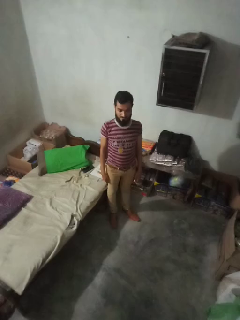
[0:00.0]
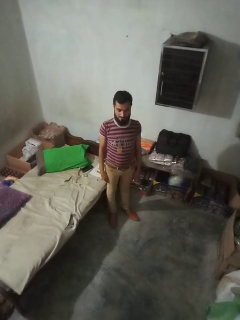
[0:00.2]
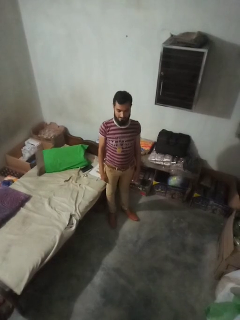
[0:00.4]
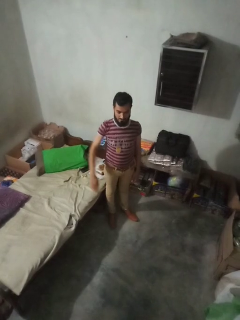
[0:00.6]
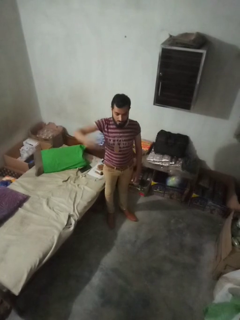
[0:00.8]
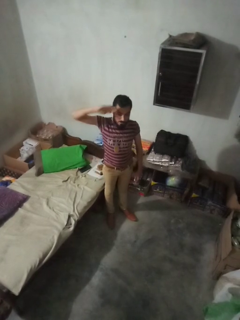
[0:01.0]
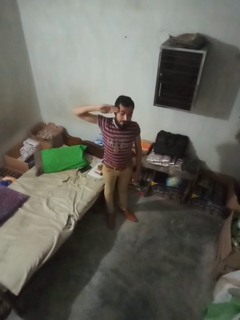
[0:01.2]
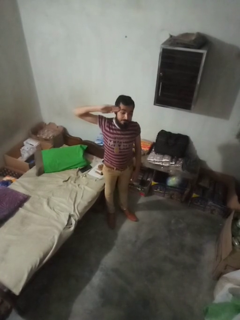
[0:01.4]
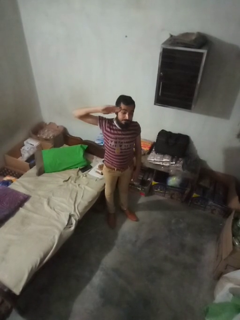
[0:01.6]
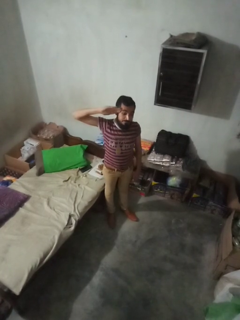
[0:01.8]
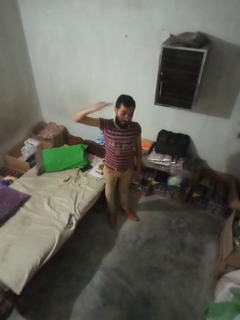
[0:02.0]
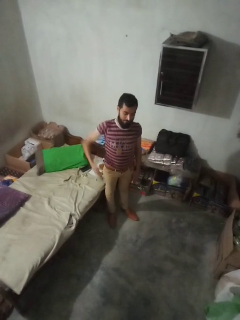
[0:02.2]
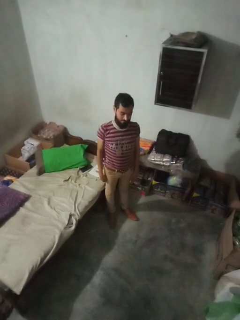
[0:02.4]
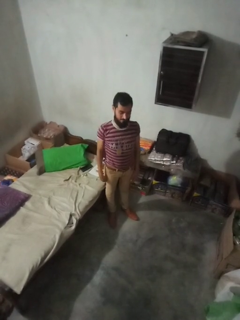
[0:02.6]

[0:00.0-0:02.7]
person salutes

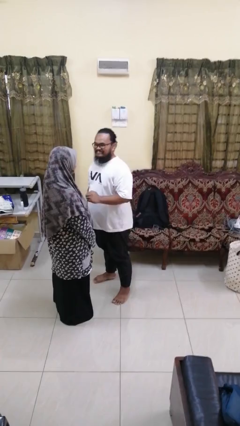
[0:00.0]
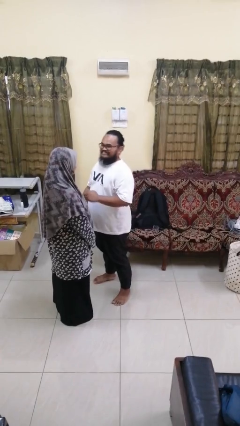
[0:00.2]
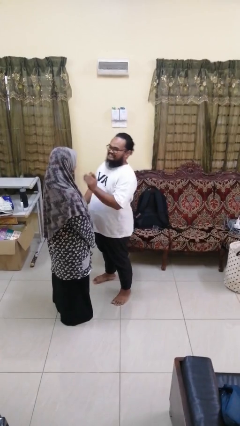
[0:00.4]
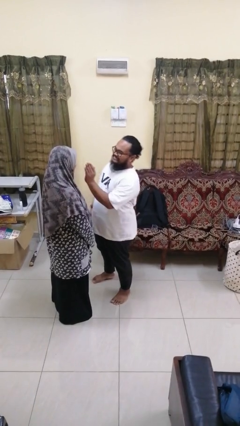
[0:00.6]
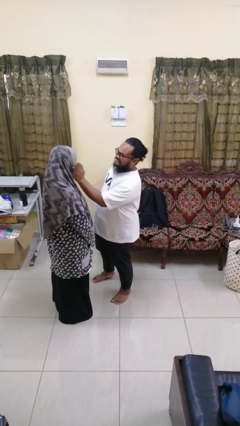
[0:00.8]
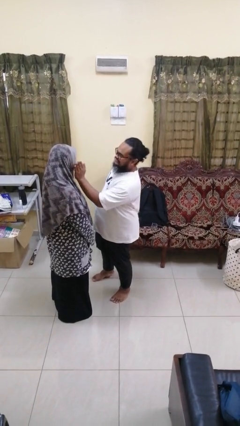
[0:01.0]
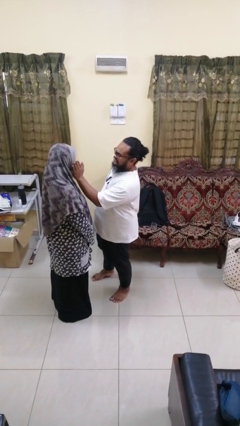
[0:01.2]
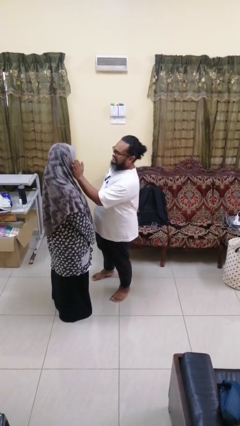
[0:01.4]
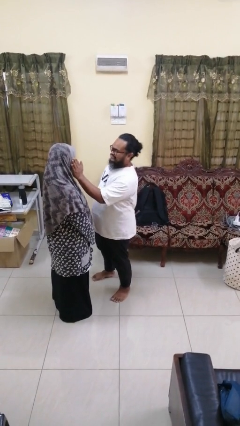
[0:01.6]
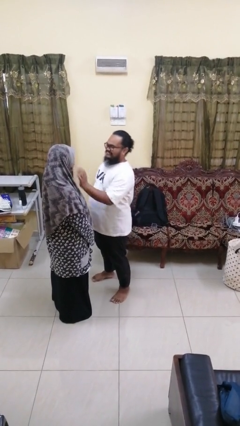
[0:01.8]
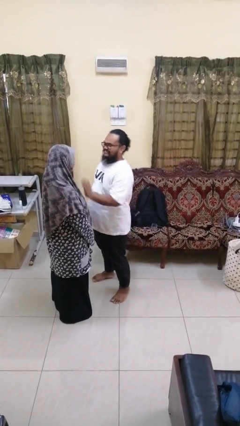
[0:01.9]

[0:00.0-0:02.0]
person touches face of person

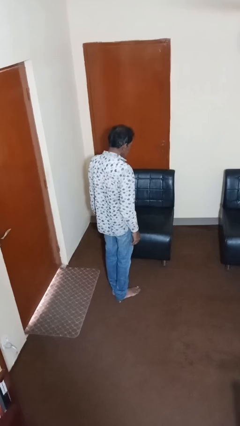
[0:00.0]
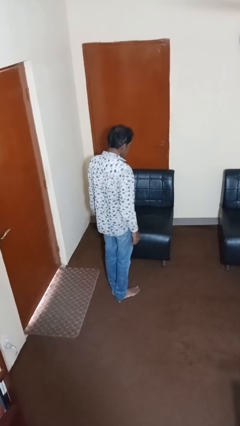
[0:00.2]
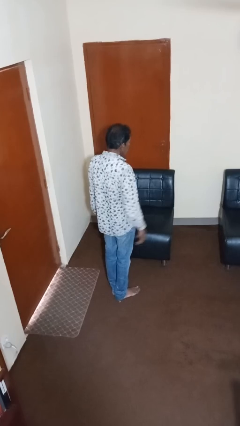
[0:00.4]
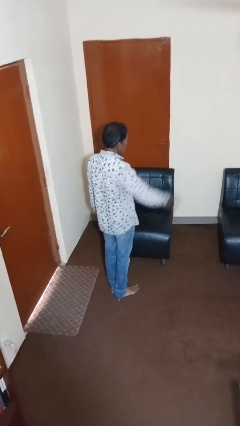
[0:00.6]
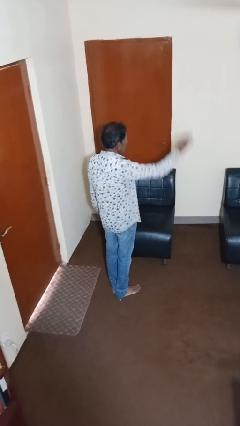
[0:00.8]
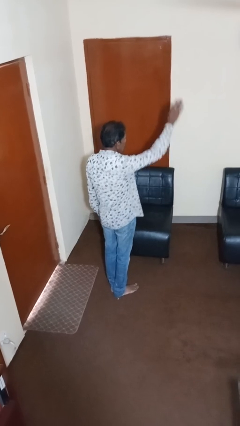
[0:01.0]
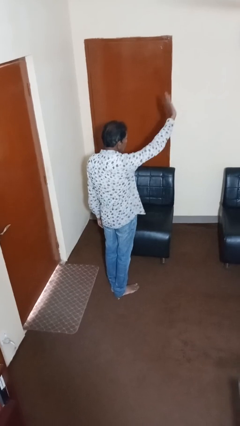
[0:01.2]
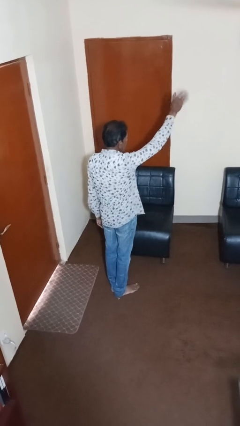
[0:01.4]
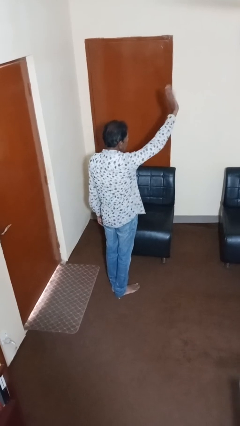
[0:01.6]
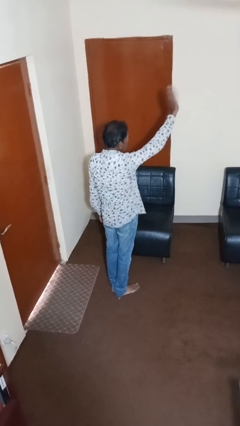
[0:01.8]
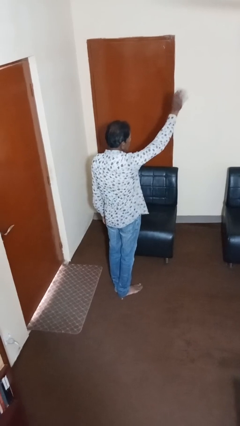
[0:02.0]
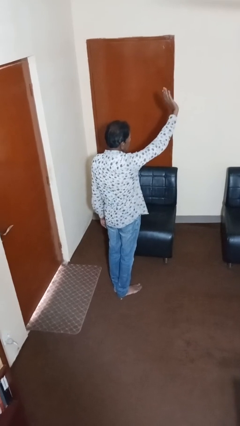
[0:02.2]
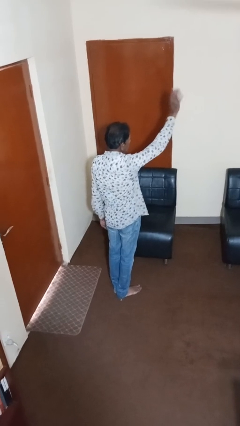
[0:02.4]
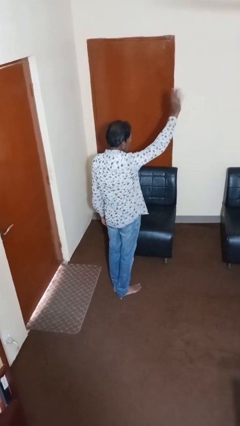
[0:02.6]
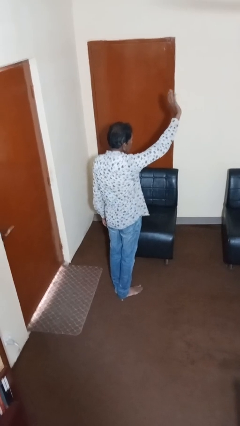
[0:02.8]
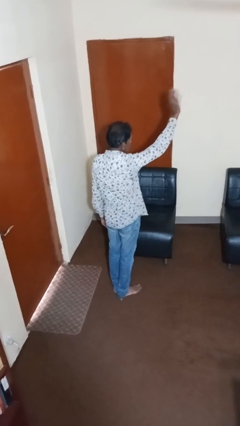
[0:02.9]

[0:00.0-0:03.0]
person waves hand over object

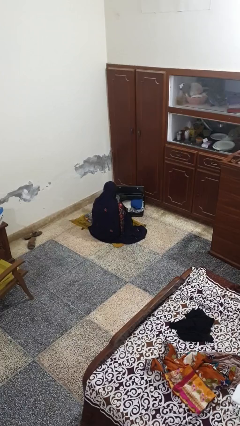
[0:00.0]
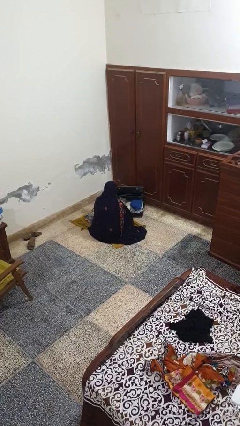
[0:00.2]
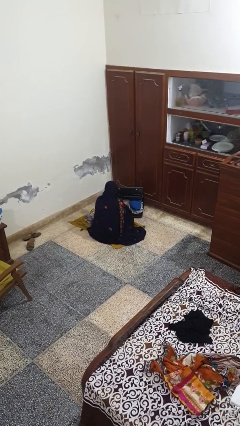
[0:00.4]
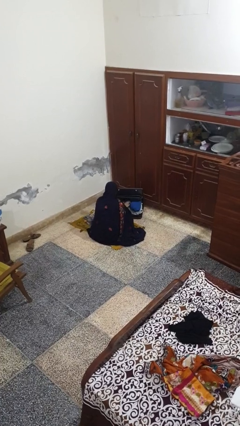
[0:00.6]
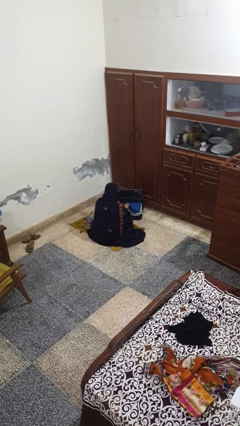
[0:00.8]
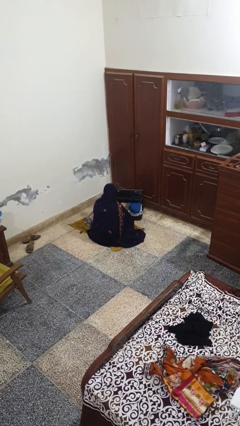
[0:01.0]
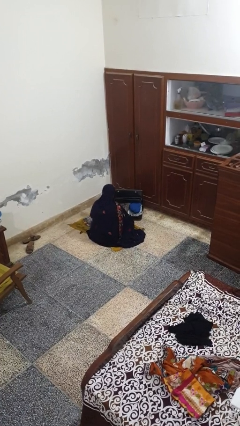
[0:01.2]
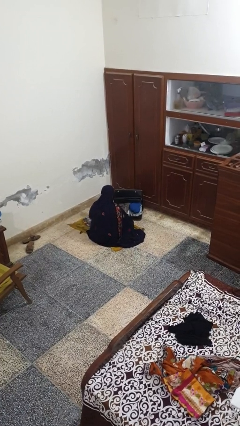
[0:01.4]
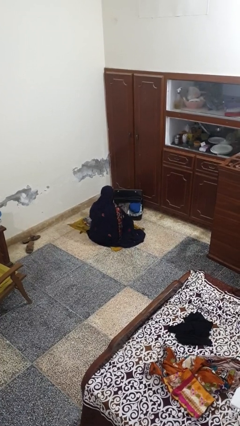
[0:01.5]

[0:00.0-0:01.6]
person loads clothes into suitcase

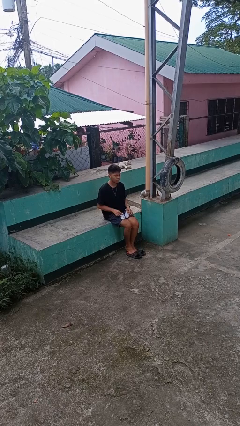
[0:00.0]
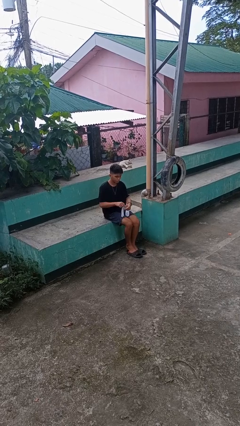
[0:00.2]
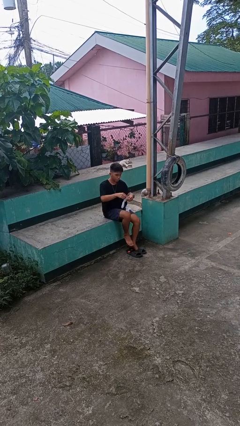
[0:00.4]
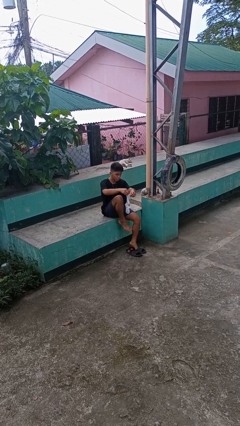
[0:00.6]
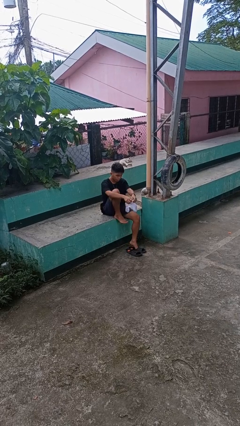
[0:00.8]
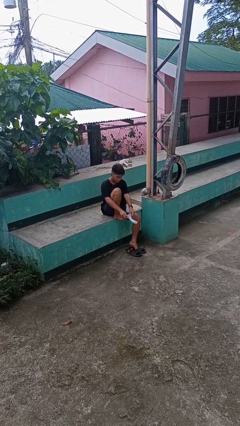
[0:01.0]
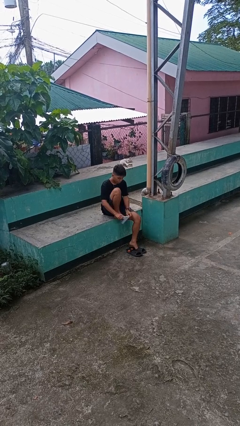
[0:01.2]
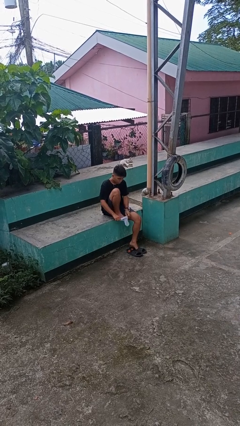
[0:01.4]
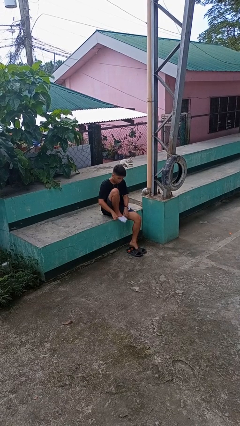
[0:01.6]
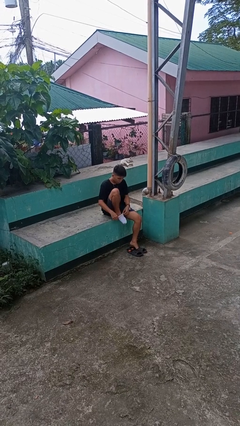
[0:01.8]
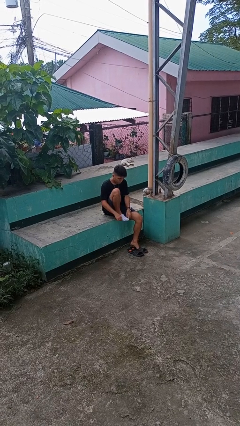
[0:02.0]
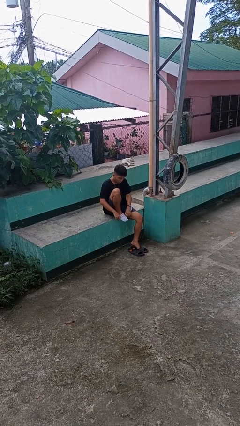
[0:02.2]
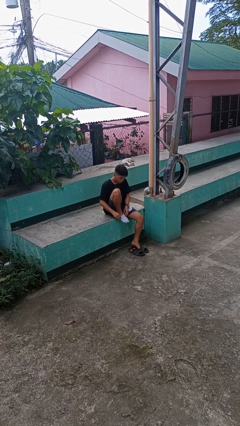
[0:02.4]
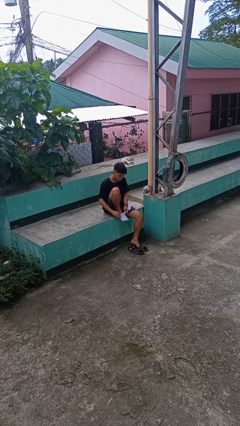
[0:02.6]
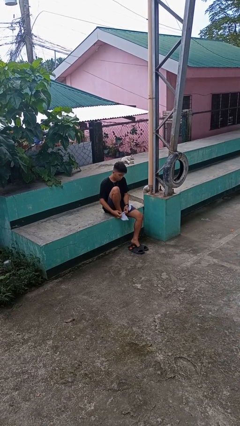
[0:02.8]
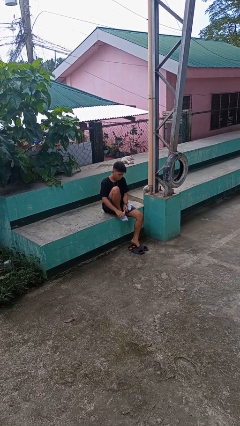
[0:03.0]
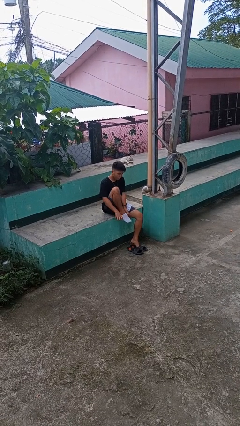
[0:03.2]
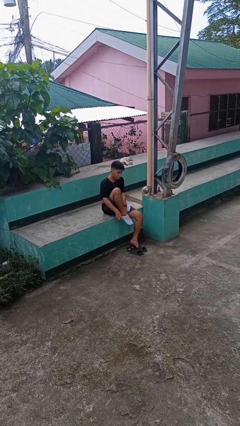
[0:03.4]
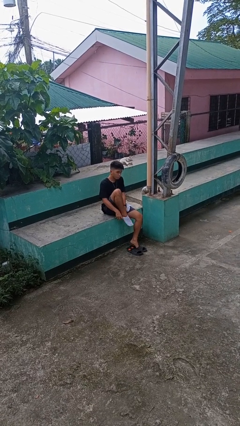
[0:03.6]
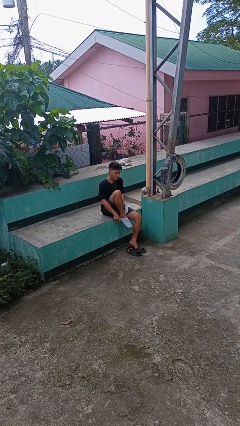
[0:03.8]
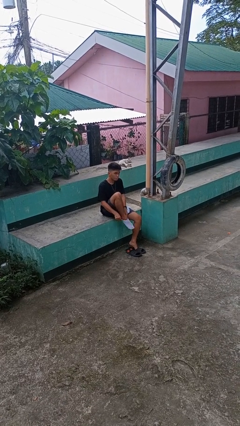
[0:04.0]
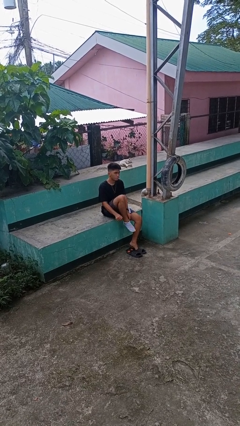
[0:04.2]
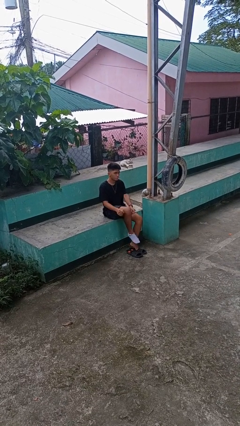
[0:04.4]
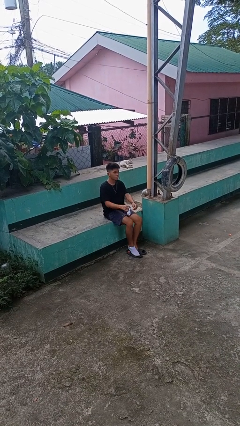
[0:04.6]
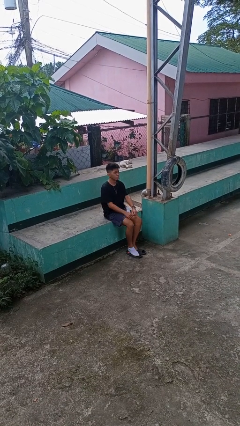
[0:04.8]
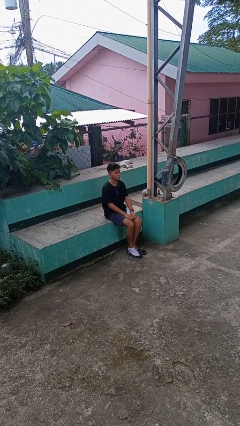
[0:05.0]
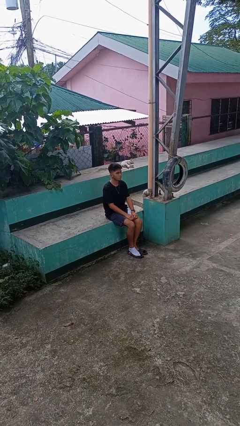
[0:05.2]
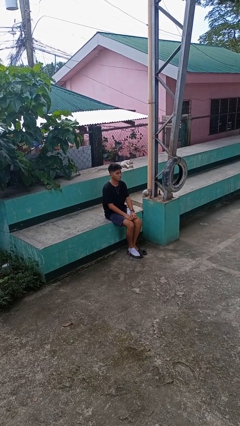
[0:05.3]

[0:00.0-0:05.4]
person puts on socks

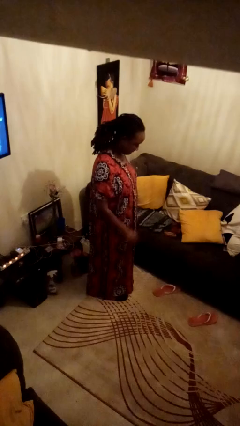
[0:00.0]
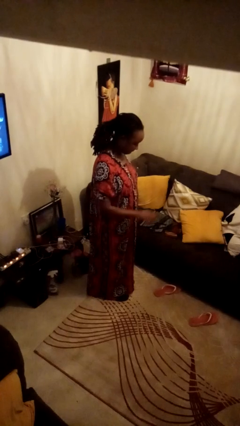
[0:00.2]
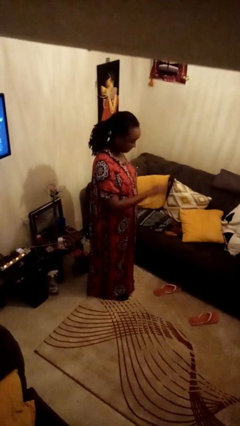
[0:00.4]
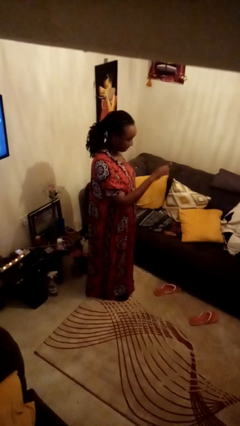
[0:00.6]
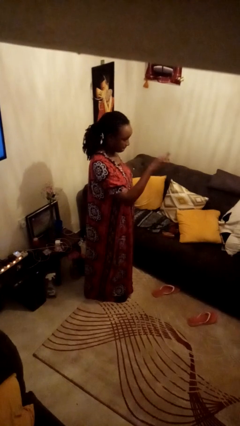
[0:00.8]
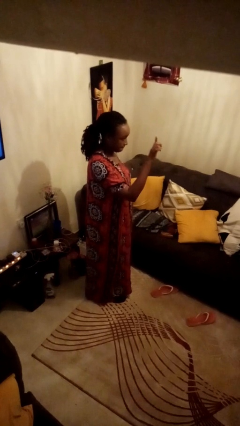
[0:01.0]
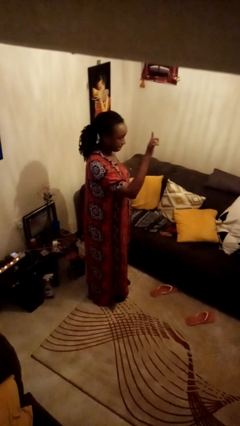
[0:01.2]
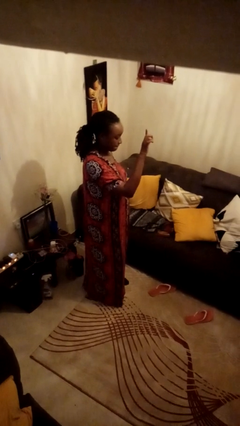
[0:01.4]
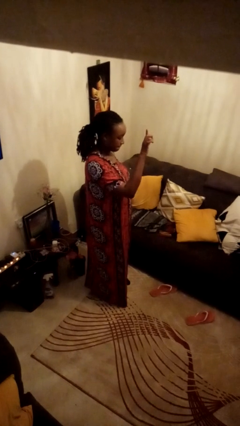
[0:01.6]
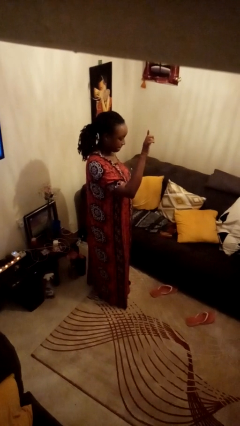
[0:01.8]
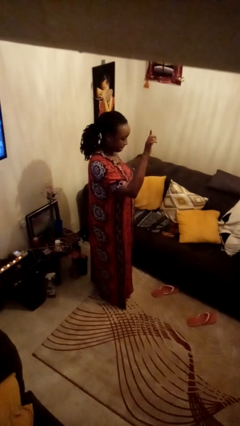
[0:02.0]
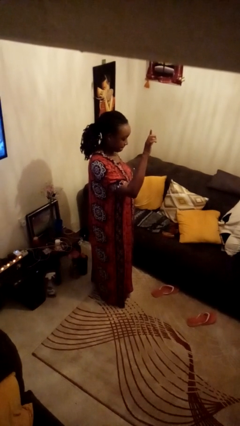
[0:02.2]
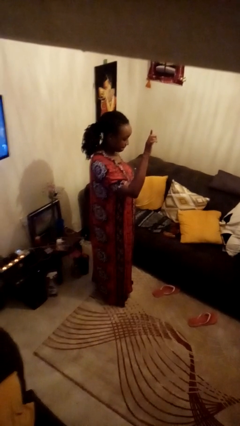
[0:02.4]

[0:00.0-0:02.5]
person gestures swipe up

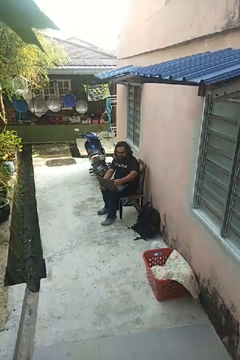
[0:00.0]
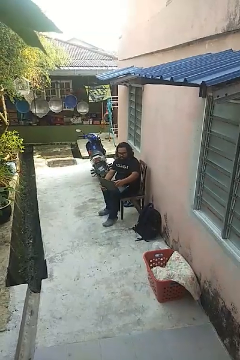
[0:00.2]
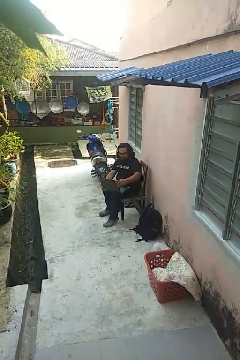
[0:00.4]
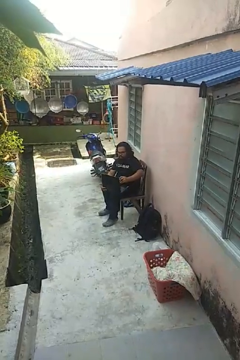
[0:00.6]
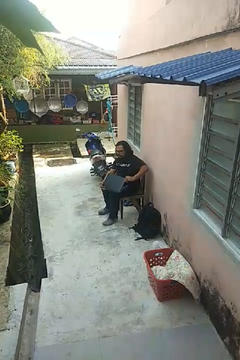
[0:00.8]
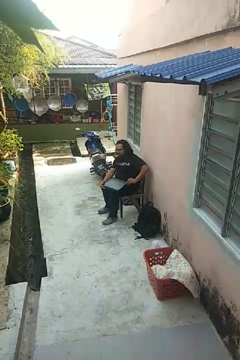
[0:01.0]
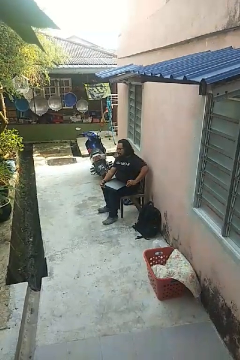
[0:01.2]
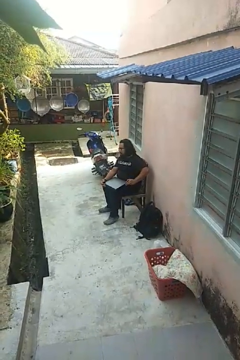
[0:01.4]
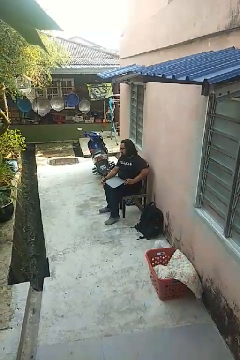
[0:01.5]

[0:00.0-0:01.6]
person closes laptop
